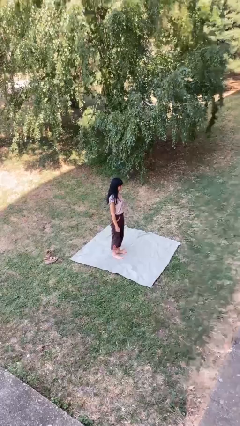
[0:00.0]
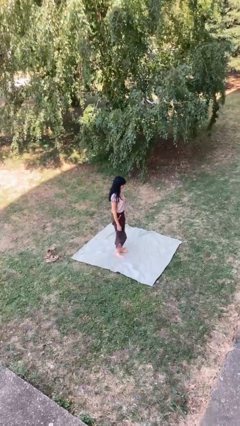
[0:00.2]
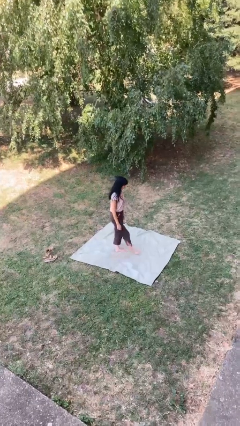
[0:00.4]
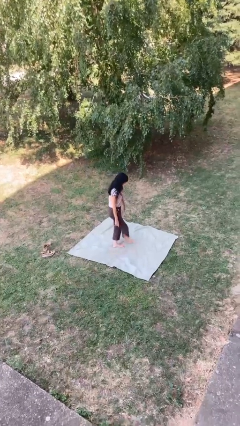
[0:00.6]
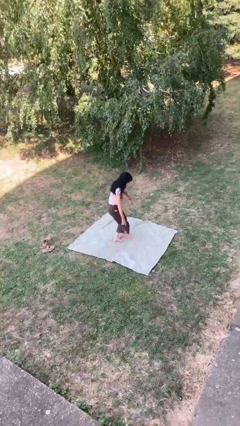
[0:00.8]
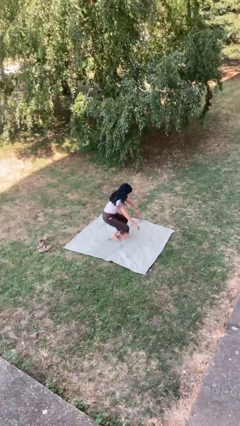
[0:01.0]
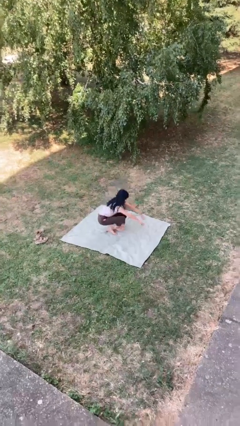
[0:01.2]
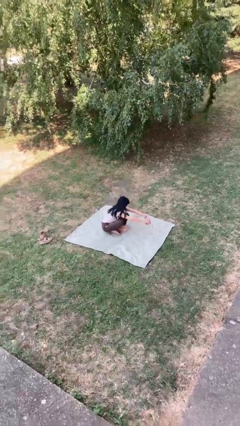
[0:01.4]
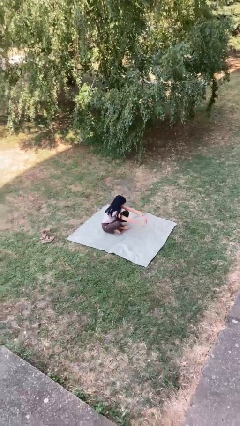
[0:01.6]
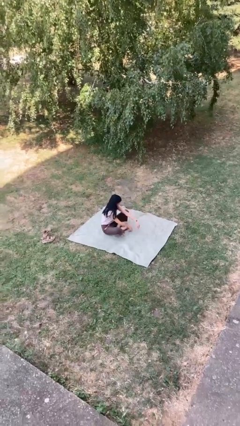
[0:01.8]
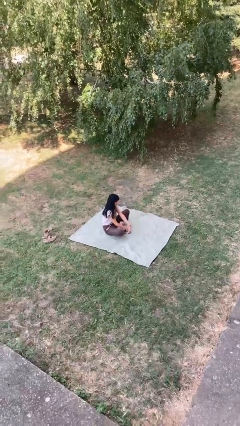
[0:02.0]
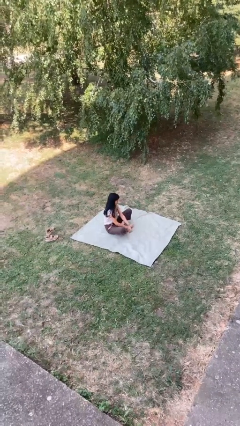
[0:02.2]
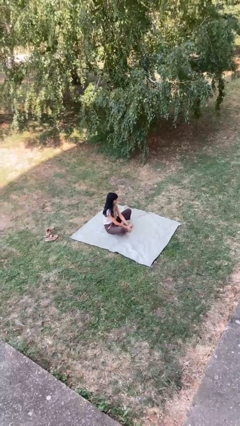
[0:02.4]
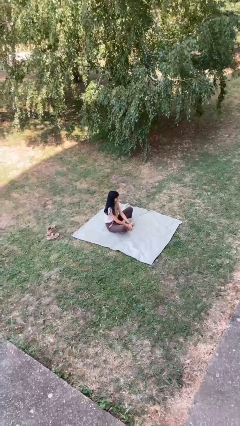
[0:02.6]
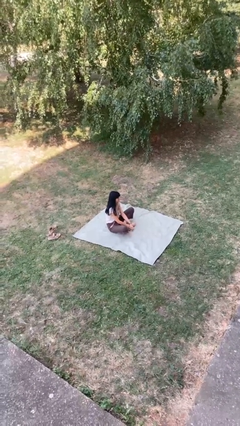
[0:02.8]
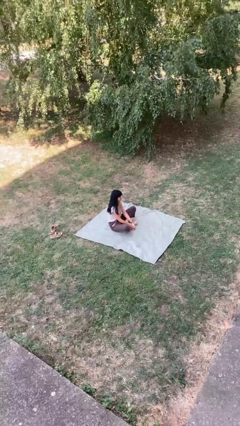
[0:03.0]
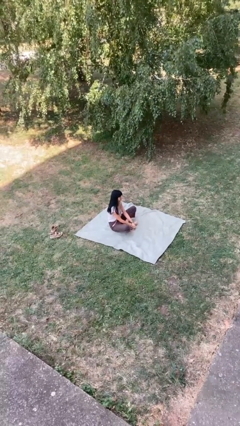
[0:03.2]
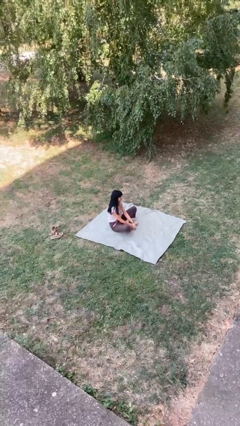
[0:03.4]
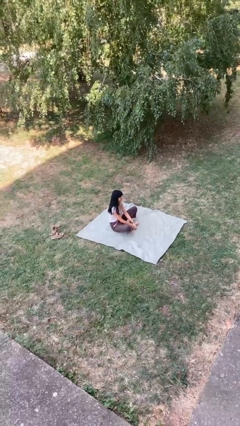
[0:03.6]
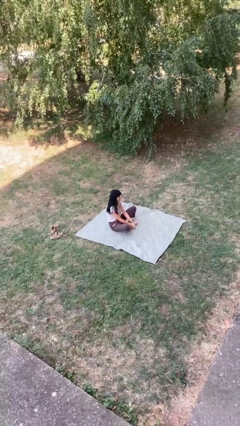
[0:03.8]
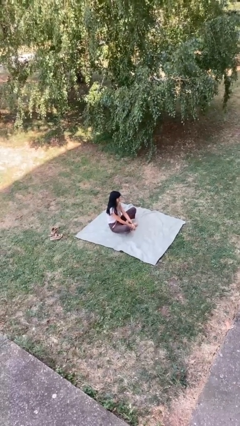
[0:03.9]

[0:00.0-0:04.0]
person sits crisscross

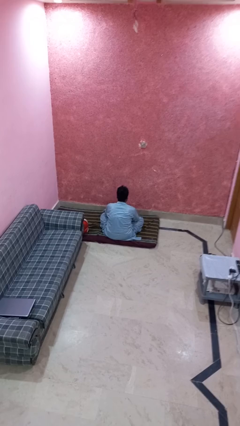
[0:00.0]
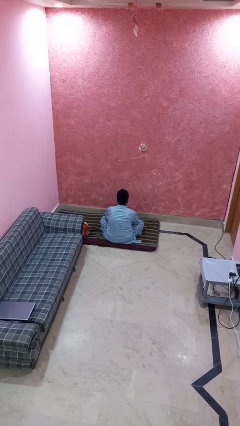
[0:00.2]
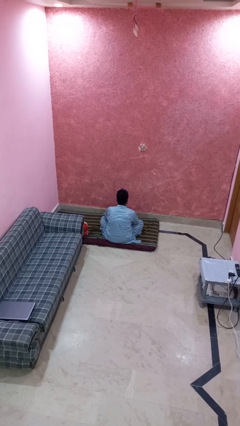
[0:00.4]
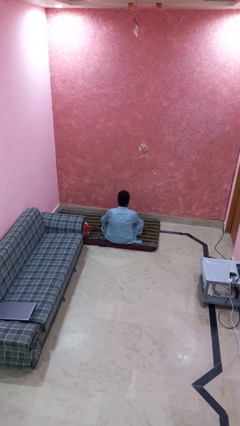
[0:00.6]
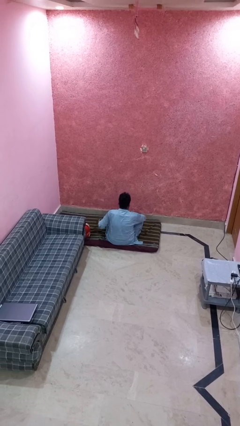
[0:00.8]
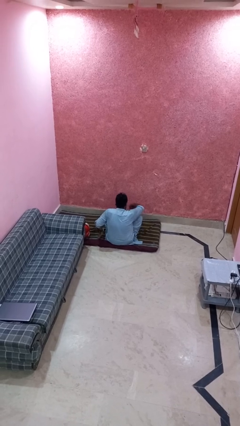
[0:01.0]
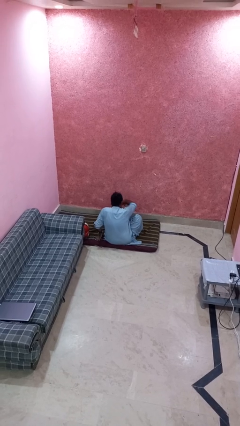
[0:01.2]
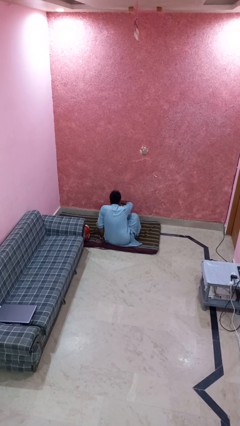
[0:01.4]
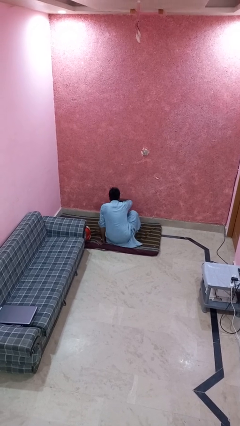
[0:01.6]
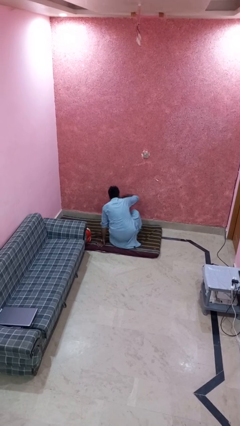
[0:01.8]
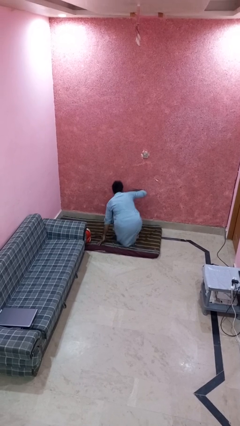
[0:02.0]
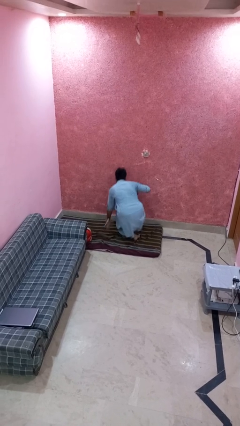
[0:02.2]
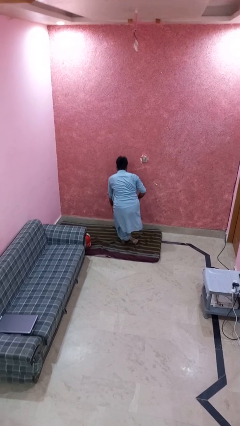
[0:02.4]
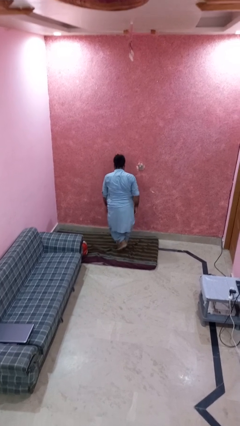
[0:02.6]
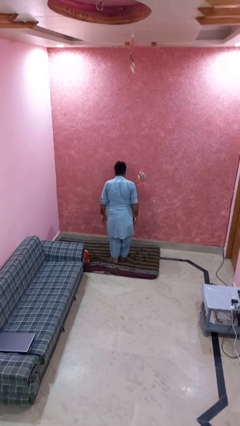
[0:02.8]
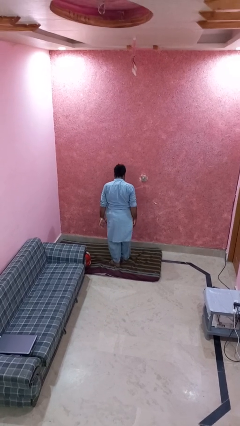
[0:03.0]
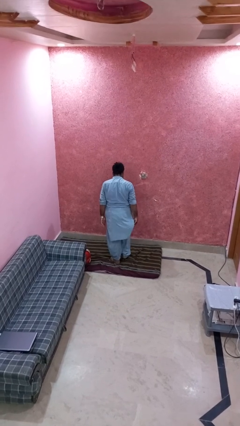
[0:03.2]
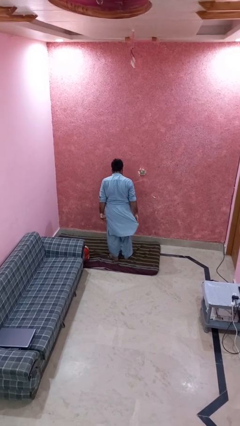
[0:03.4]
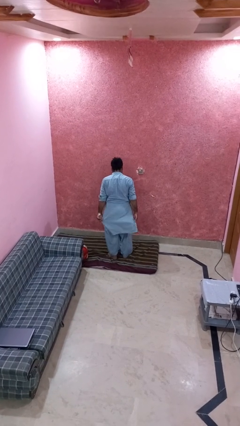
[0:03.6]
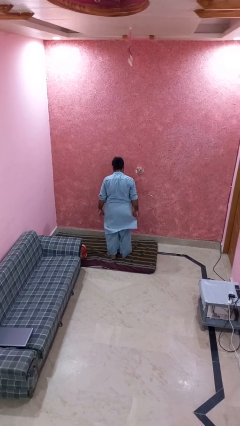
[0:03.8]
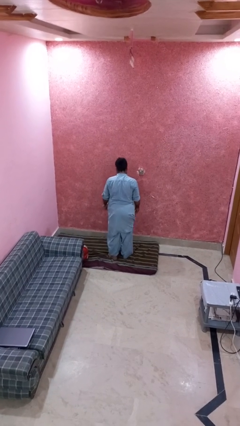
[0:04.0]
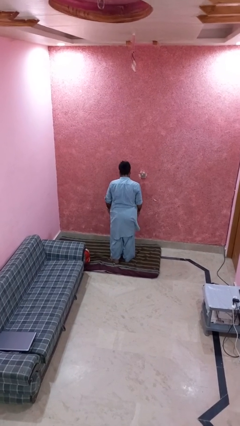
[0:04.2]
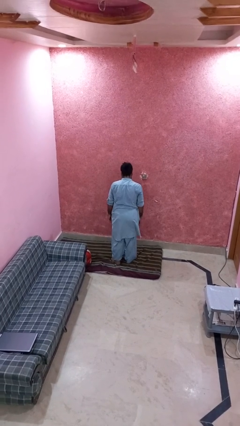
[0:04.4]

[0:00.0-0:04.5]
person stands up from floor

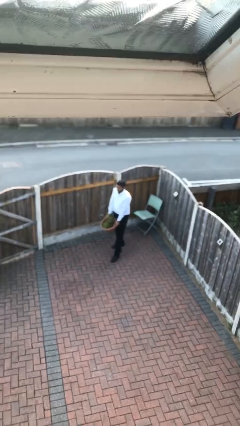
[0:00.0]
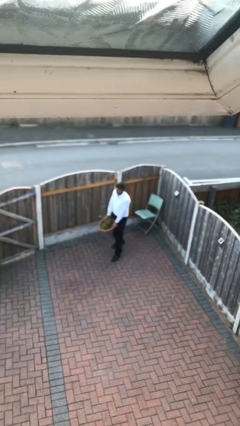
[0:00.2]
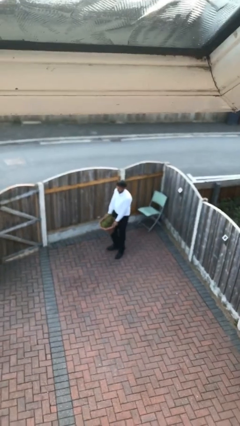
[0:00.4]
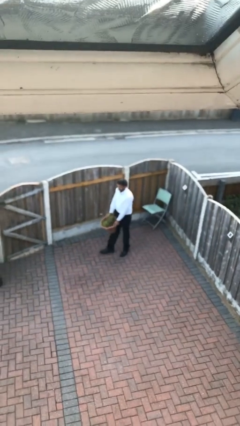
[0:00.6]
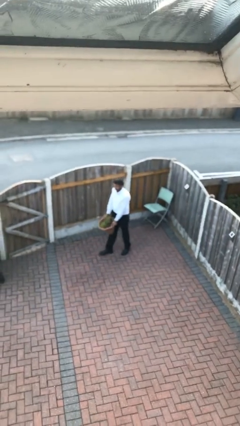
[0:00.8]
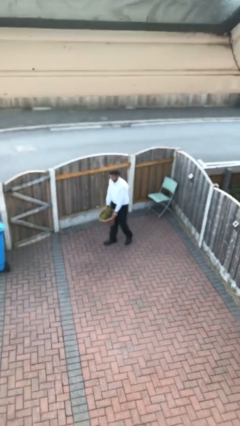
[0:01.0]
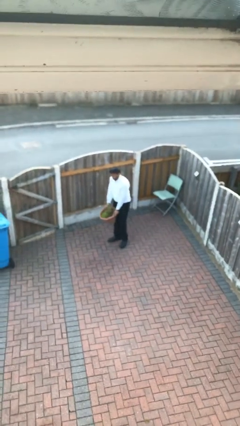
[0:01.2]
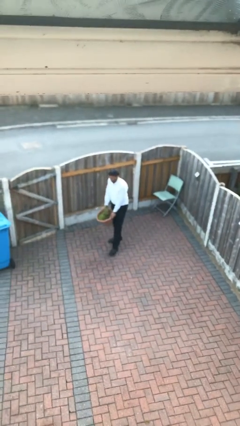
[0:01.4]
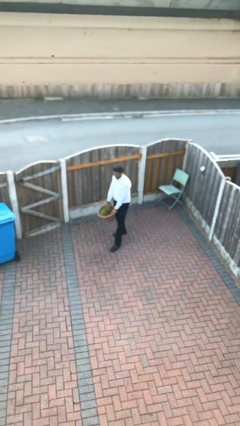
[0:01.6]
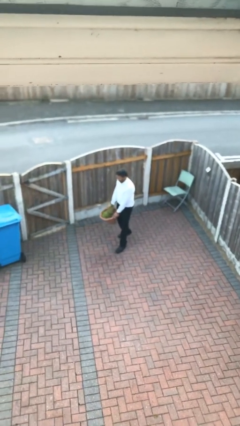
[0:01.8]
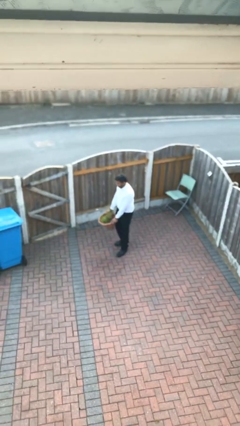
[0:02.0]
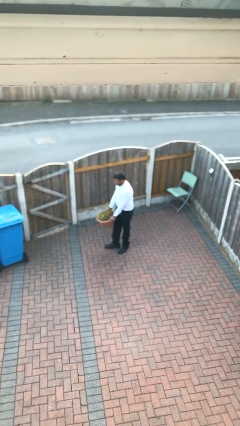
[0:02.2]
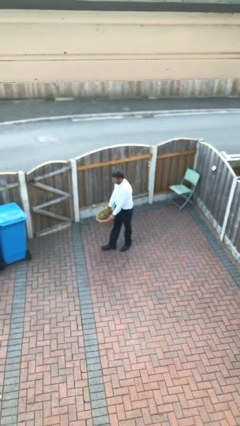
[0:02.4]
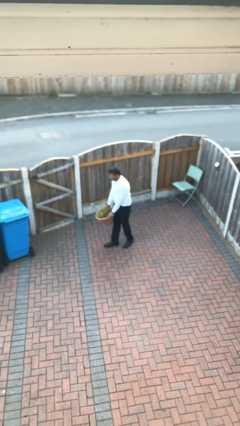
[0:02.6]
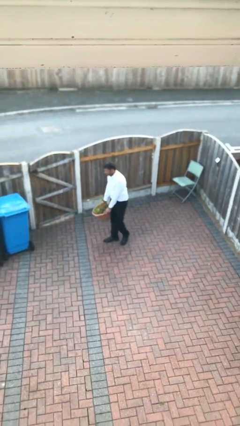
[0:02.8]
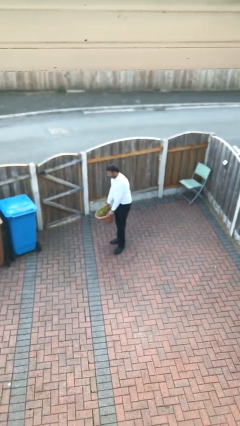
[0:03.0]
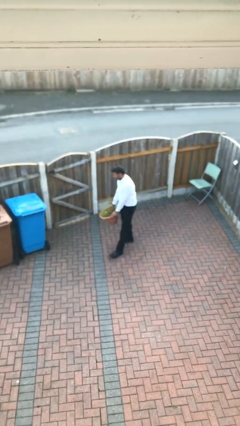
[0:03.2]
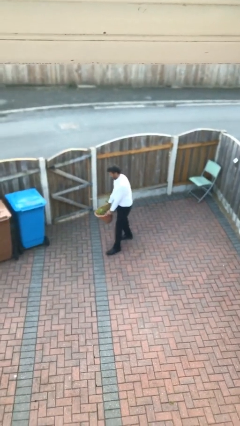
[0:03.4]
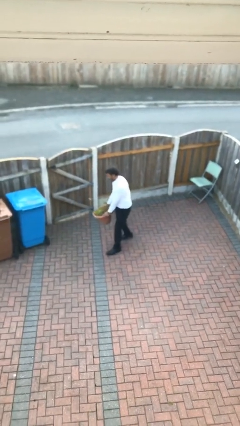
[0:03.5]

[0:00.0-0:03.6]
person carries heavy object

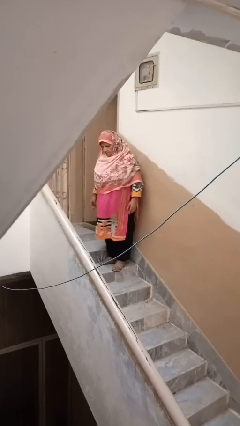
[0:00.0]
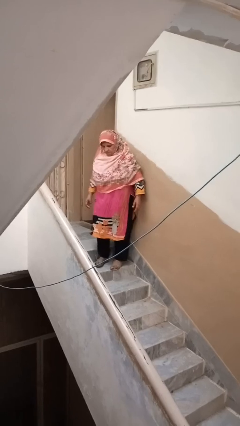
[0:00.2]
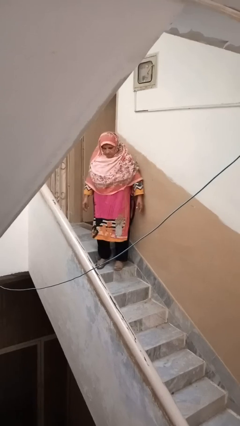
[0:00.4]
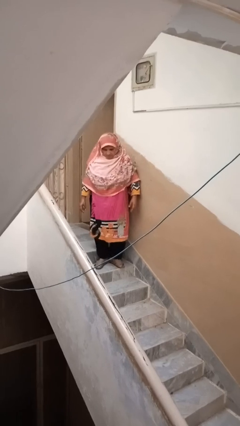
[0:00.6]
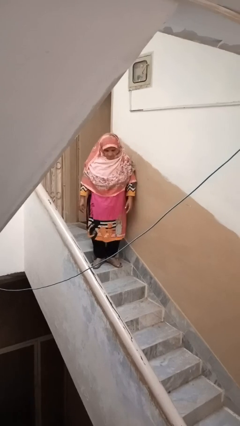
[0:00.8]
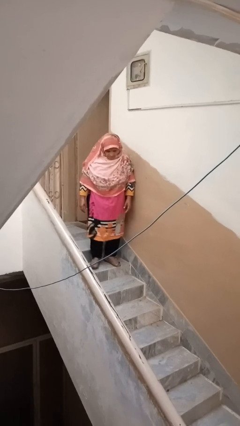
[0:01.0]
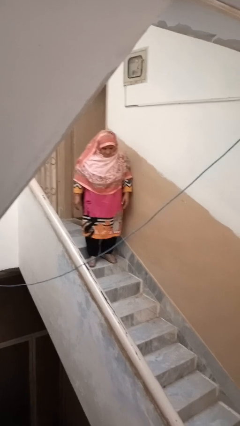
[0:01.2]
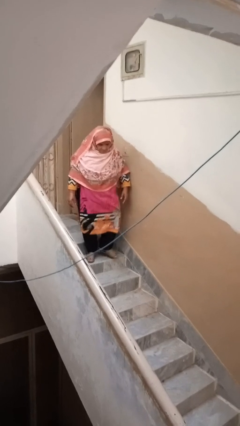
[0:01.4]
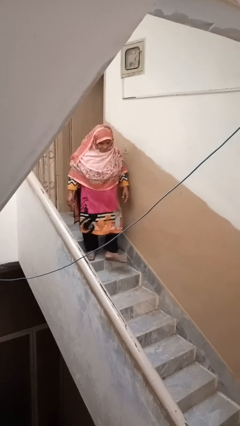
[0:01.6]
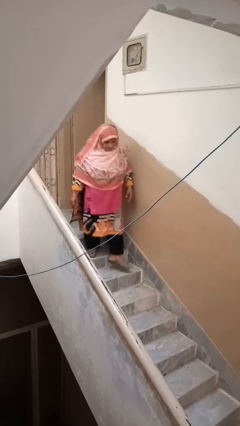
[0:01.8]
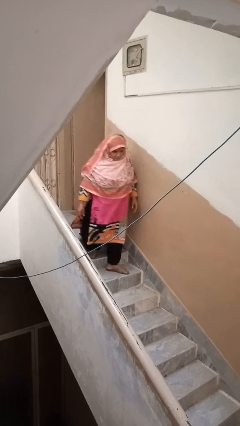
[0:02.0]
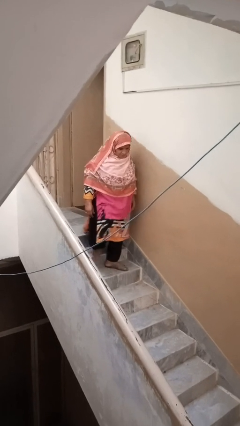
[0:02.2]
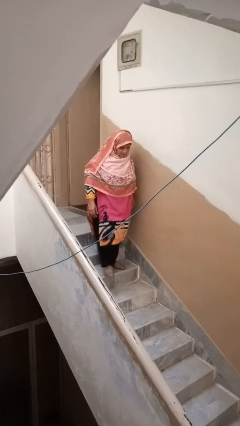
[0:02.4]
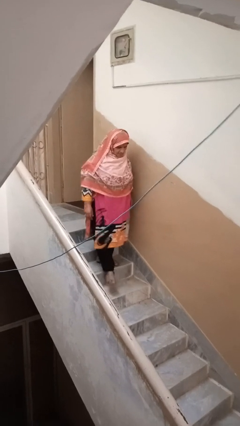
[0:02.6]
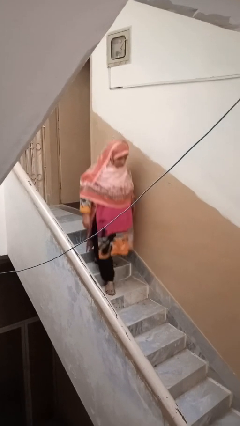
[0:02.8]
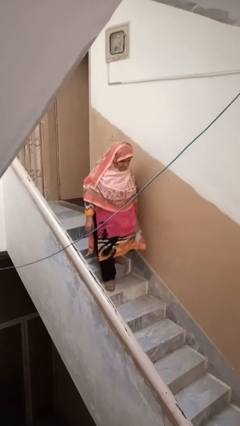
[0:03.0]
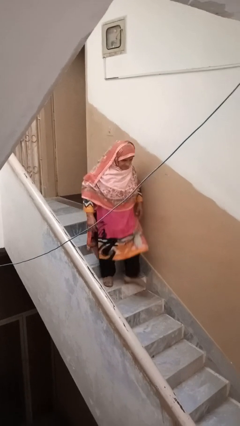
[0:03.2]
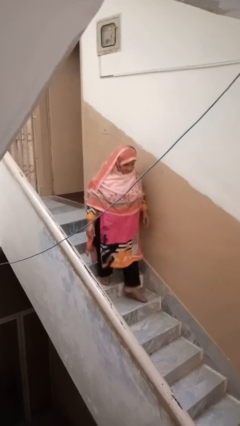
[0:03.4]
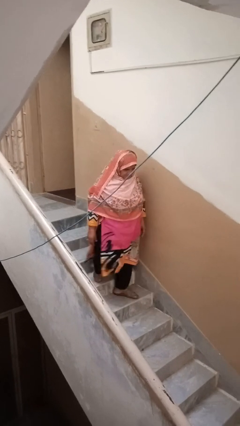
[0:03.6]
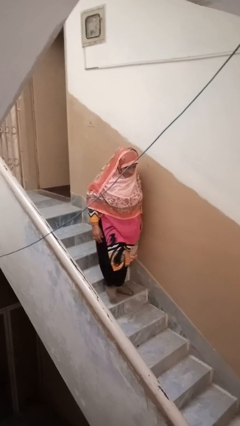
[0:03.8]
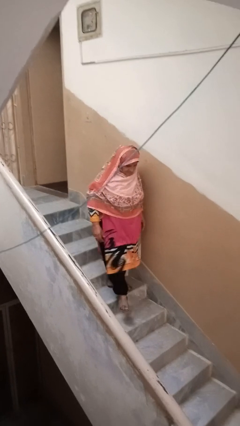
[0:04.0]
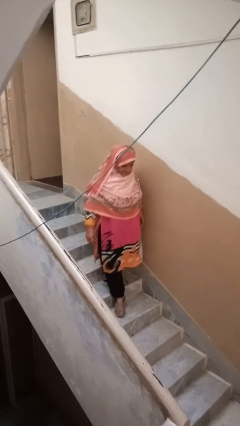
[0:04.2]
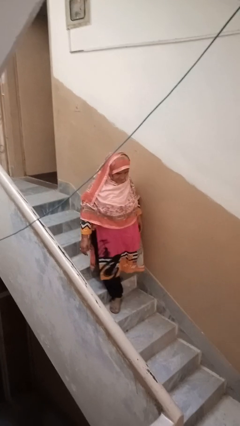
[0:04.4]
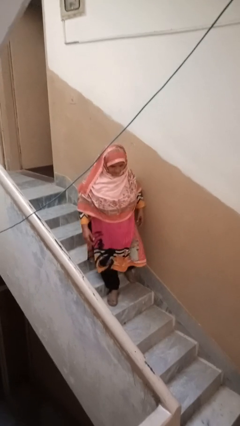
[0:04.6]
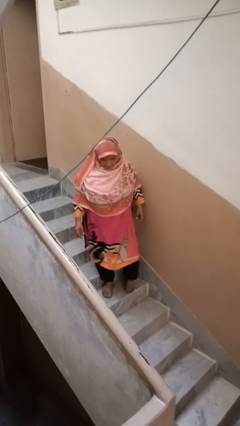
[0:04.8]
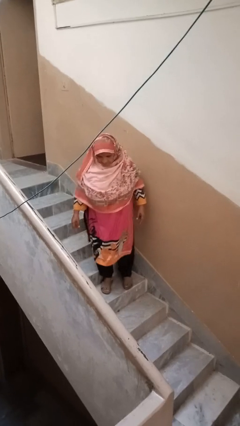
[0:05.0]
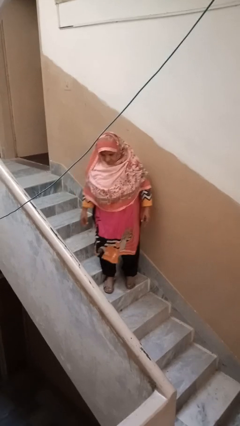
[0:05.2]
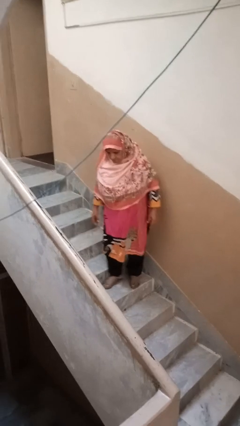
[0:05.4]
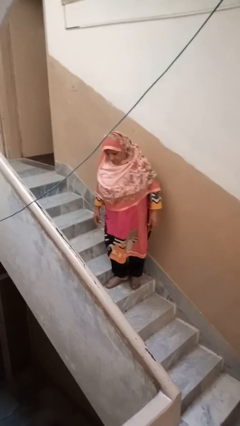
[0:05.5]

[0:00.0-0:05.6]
person climbs down stairs

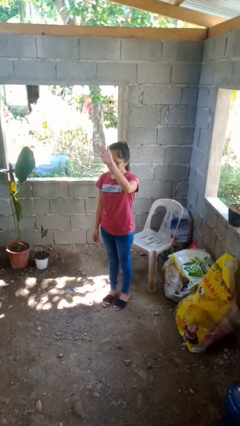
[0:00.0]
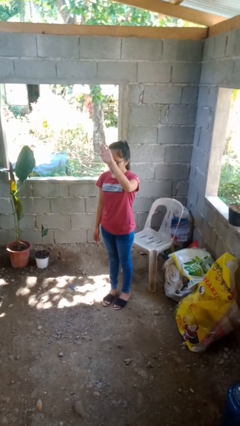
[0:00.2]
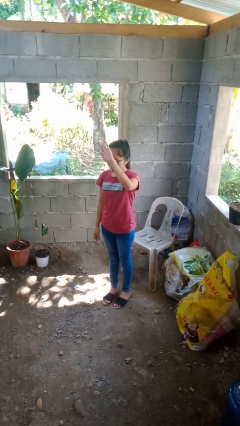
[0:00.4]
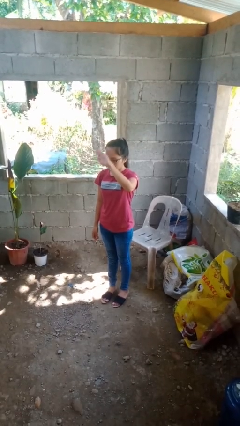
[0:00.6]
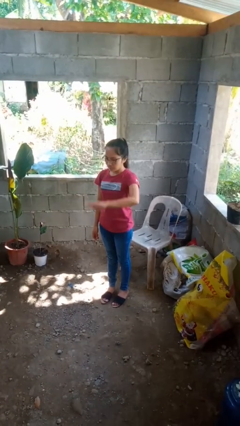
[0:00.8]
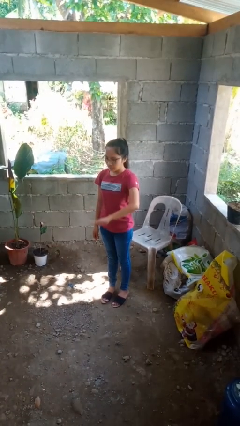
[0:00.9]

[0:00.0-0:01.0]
person gestures swipe down
